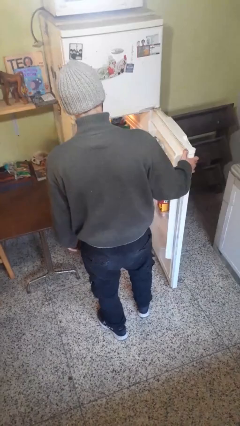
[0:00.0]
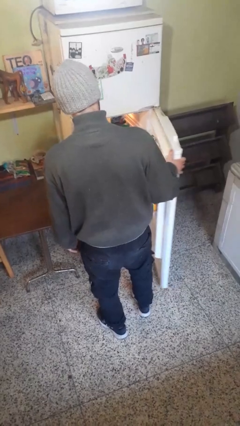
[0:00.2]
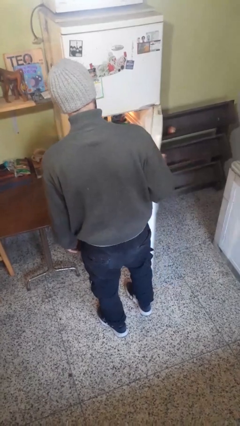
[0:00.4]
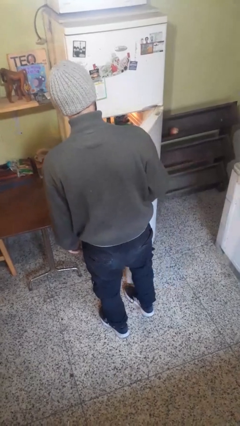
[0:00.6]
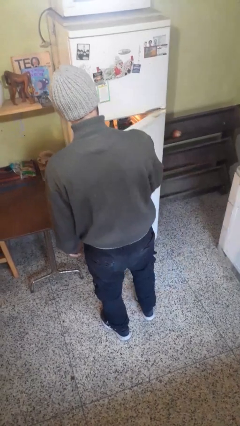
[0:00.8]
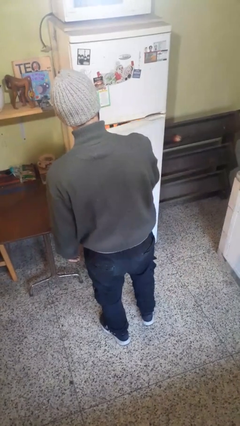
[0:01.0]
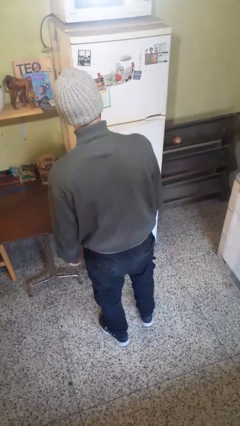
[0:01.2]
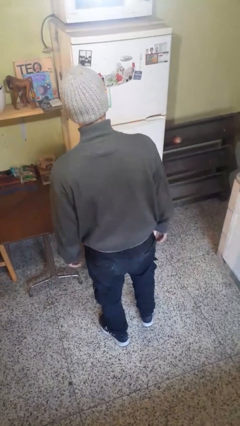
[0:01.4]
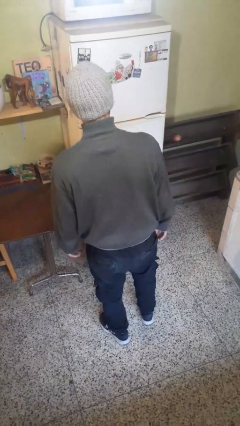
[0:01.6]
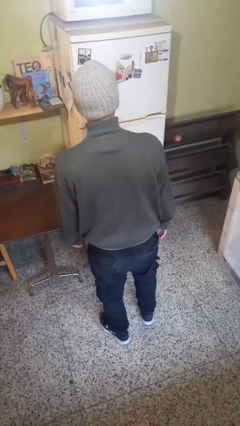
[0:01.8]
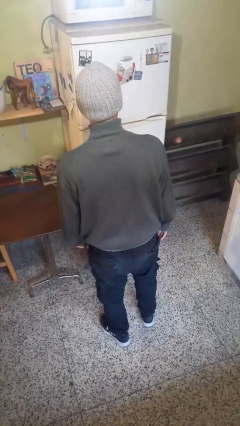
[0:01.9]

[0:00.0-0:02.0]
person closes refrigerator

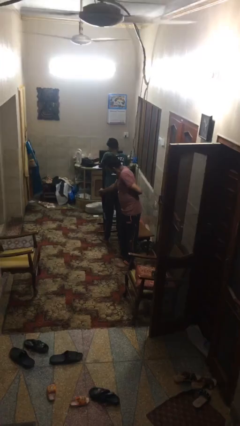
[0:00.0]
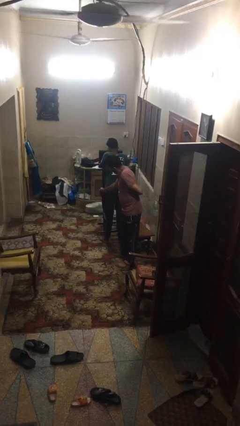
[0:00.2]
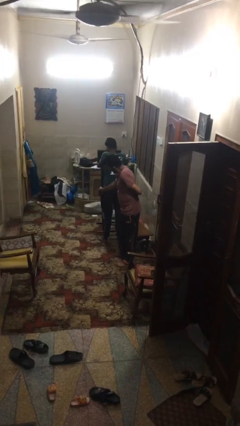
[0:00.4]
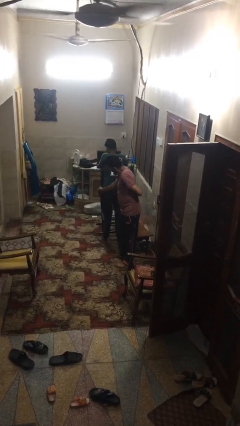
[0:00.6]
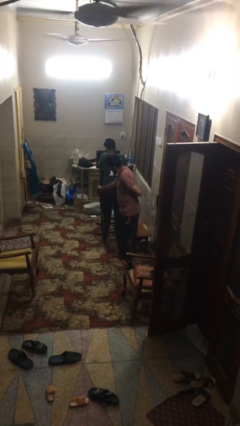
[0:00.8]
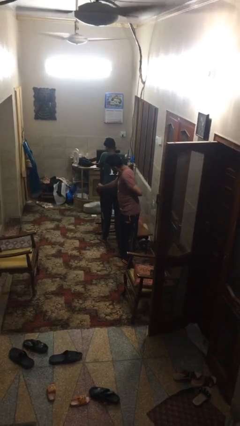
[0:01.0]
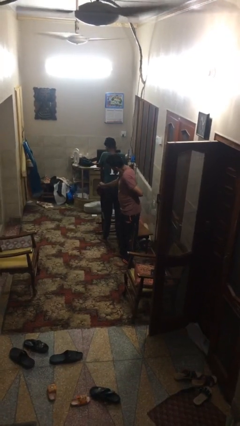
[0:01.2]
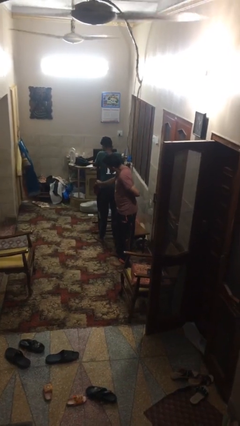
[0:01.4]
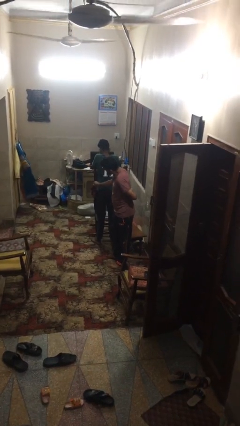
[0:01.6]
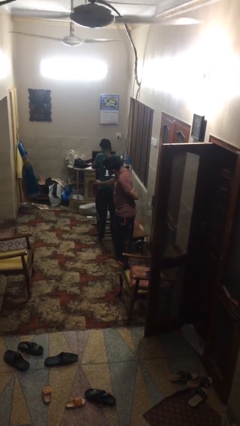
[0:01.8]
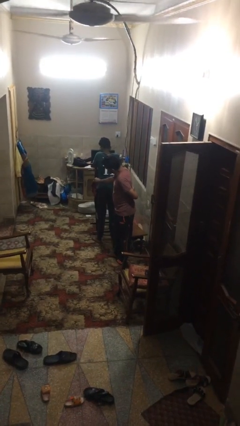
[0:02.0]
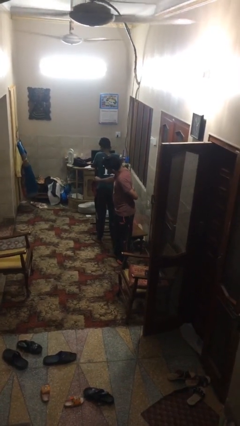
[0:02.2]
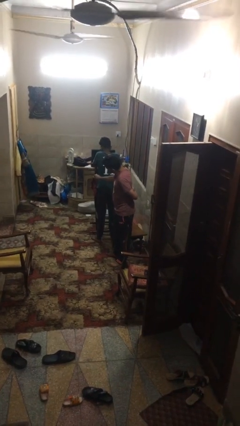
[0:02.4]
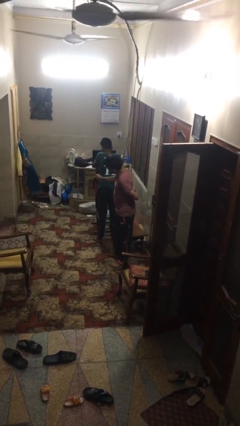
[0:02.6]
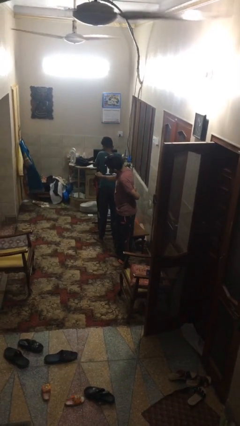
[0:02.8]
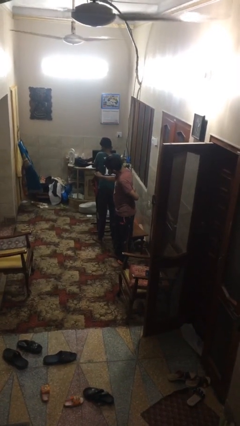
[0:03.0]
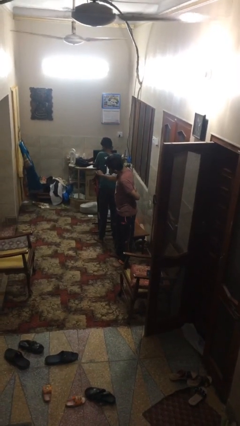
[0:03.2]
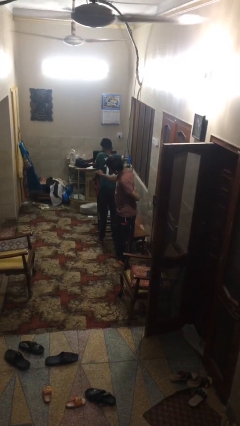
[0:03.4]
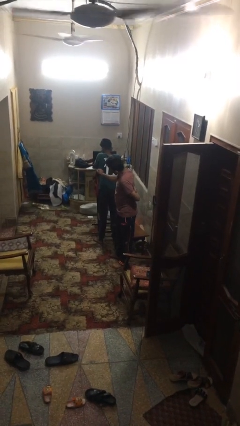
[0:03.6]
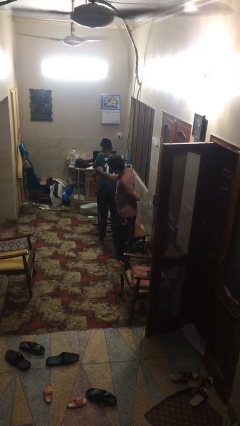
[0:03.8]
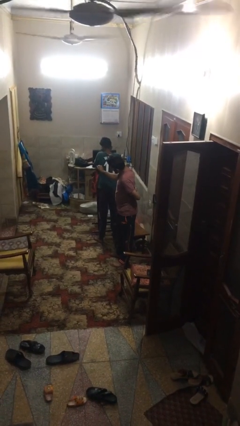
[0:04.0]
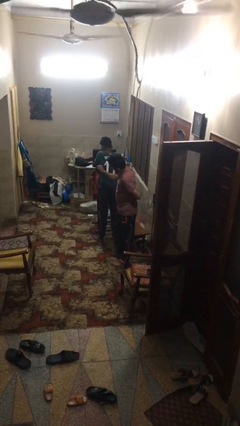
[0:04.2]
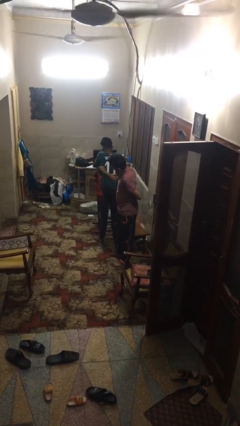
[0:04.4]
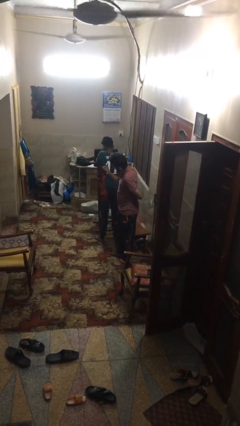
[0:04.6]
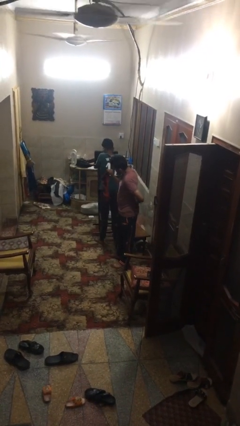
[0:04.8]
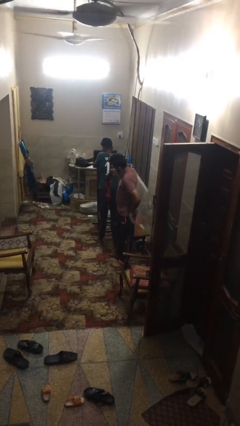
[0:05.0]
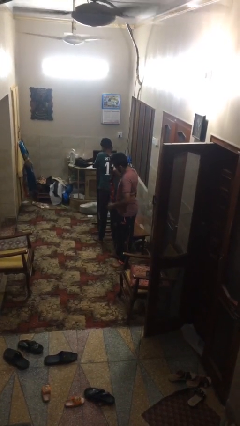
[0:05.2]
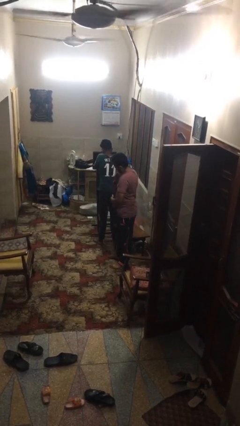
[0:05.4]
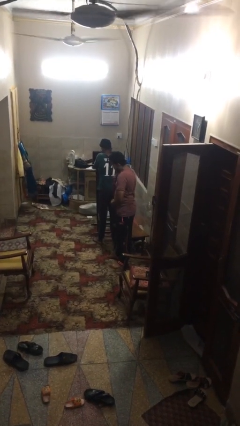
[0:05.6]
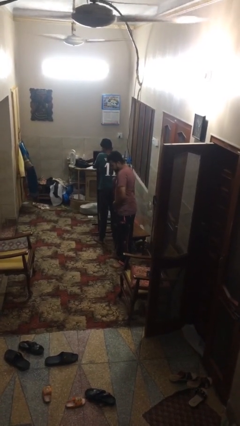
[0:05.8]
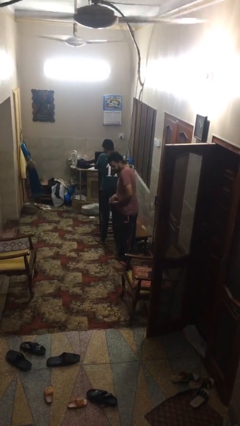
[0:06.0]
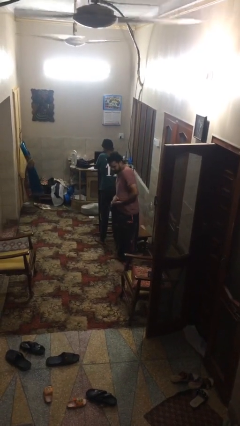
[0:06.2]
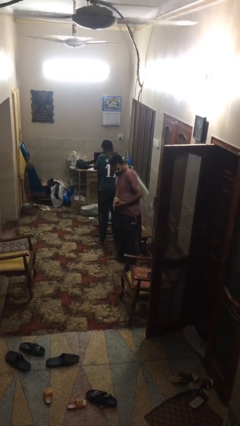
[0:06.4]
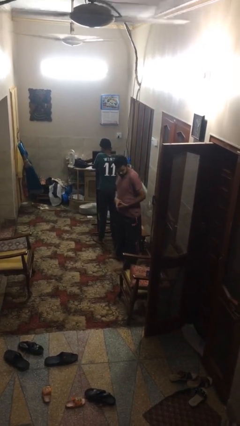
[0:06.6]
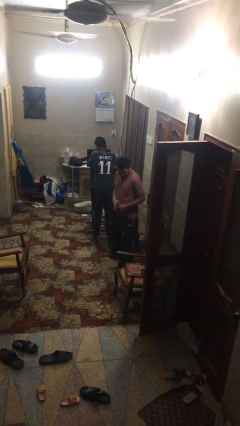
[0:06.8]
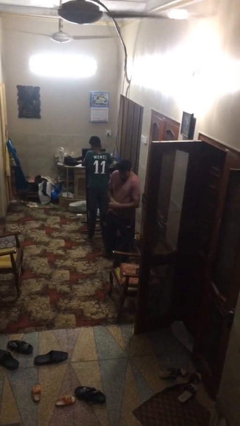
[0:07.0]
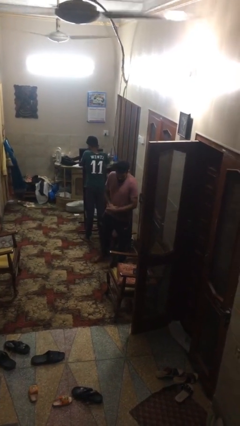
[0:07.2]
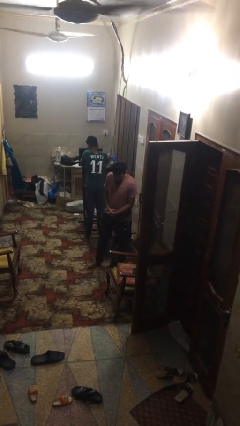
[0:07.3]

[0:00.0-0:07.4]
person steals object from person

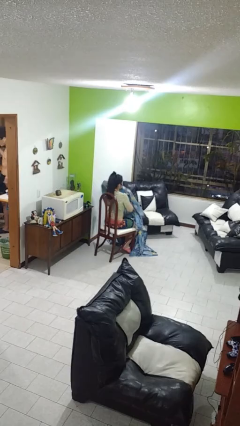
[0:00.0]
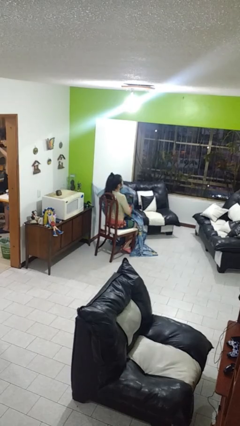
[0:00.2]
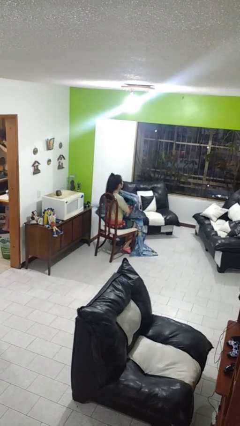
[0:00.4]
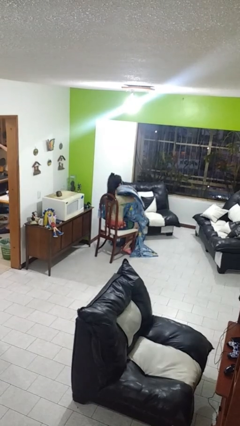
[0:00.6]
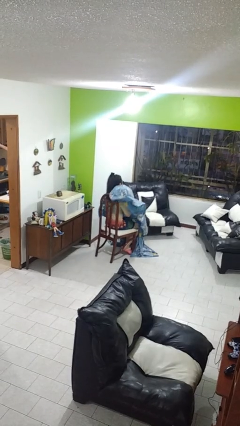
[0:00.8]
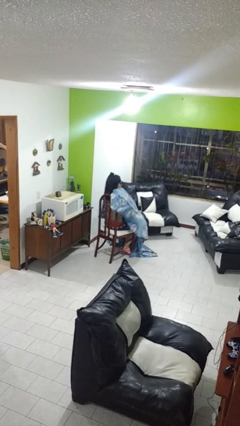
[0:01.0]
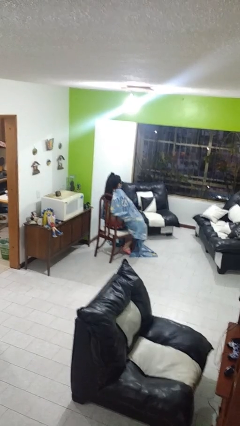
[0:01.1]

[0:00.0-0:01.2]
person covers with blanket

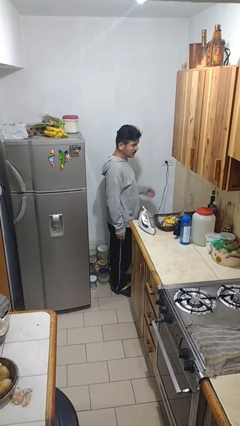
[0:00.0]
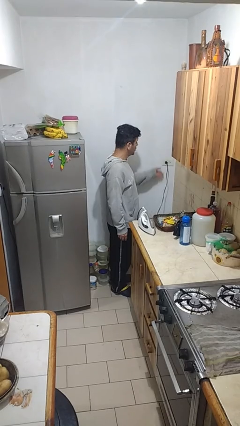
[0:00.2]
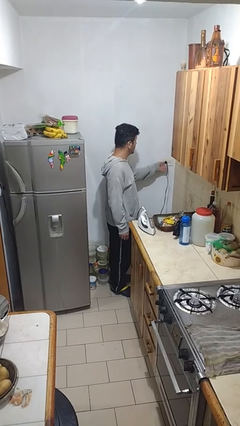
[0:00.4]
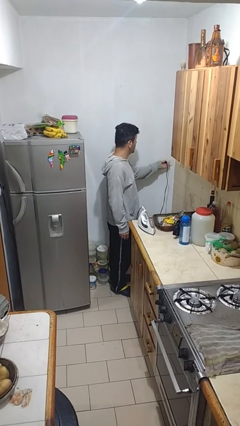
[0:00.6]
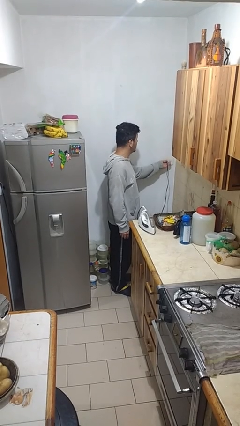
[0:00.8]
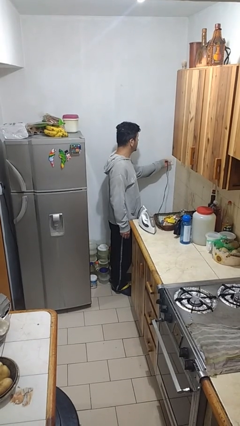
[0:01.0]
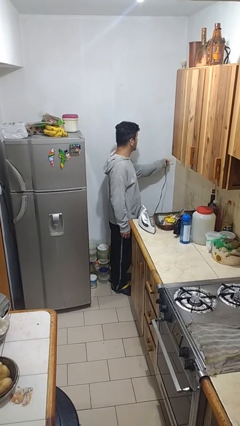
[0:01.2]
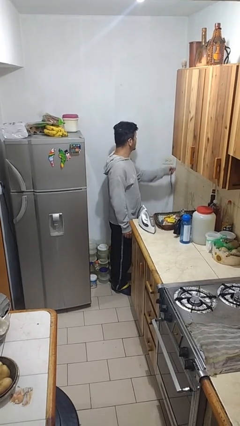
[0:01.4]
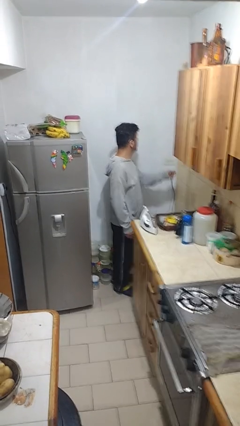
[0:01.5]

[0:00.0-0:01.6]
person unplugs from electrical socket

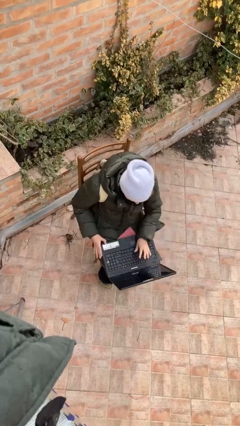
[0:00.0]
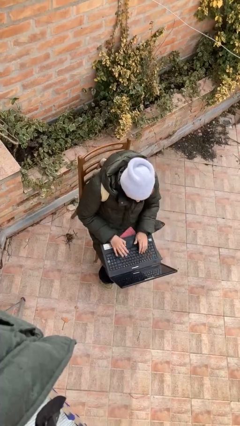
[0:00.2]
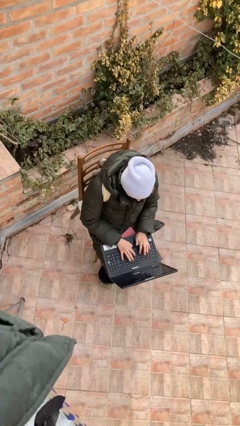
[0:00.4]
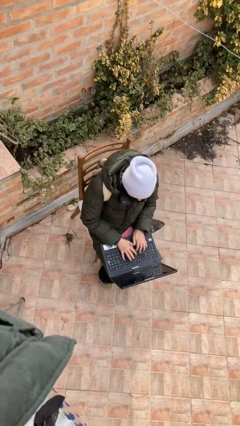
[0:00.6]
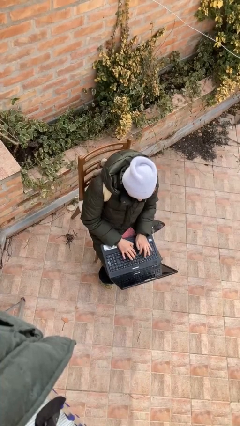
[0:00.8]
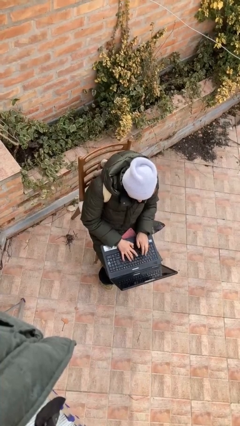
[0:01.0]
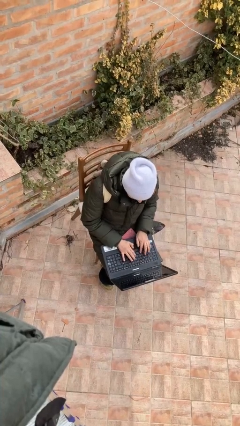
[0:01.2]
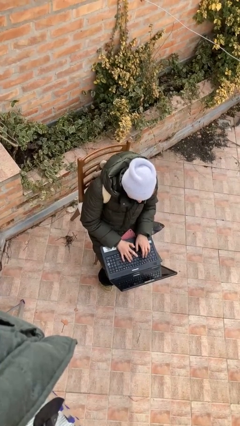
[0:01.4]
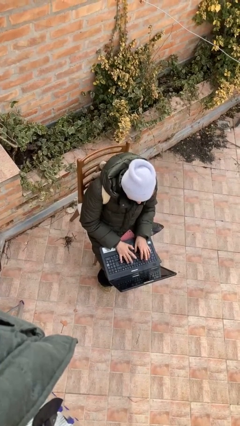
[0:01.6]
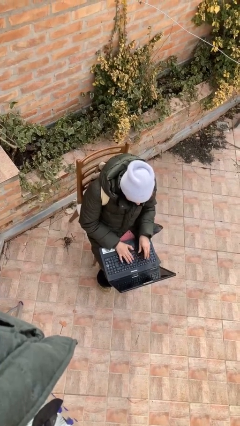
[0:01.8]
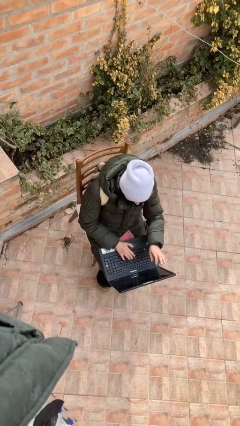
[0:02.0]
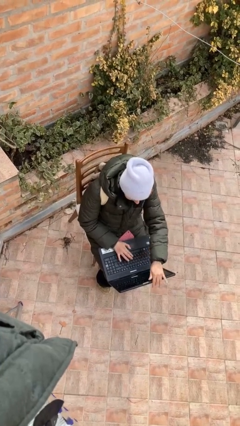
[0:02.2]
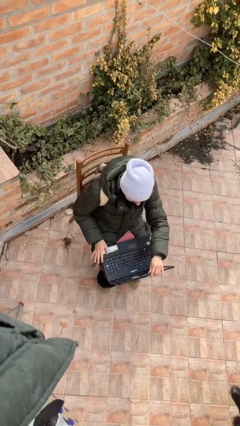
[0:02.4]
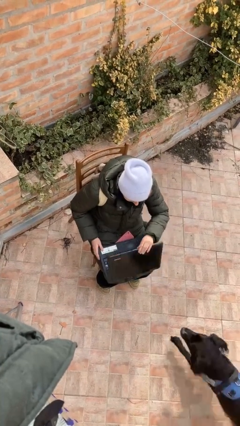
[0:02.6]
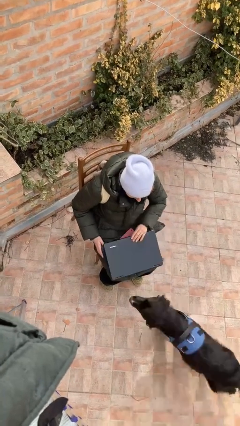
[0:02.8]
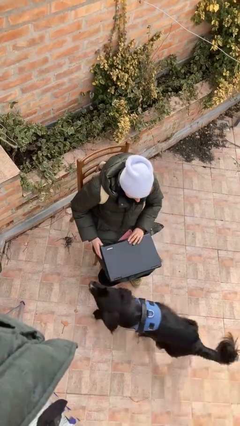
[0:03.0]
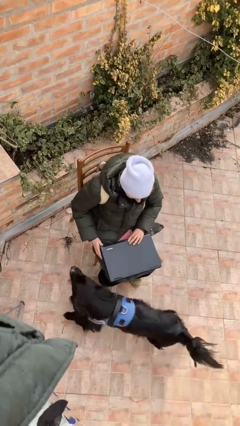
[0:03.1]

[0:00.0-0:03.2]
person interacts with laptop

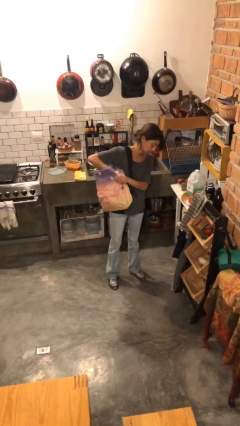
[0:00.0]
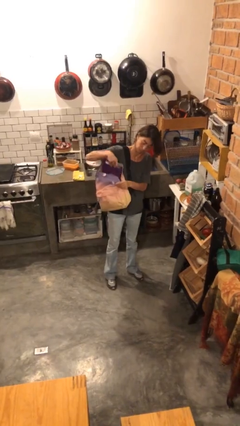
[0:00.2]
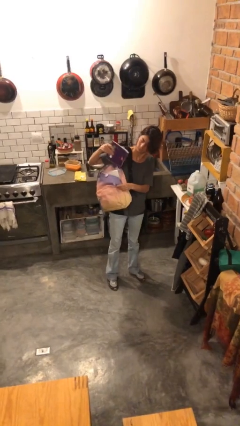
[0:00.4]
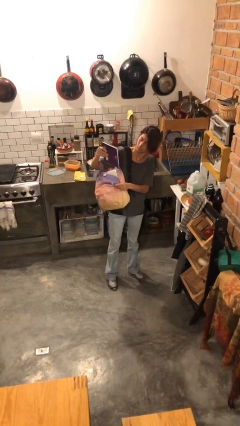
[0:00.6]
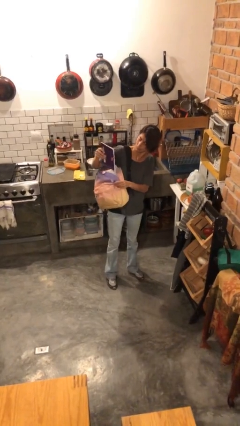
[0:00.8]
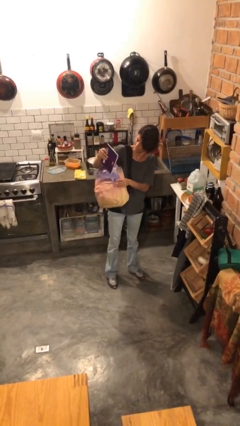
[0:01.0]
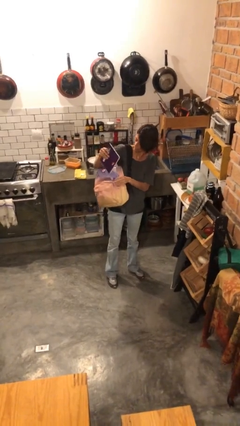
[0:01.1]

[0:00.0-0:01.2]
person takes object from backpack

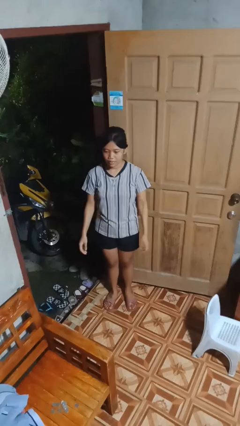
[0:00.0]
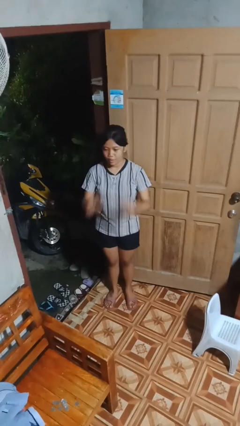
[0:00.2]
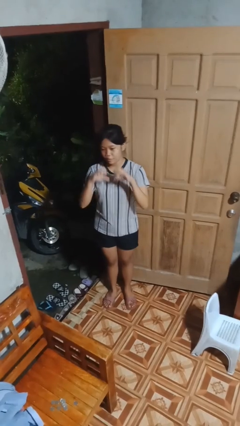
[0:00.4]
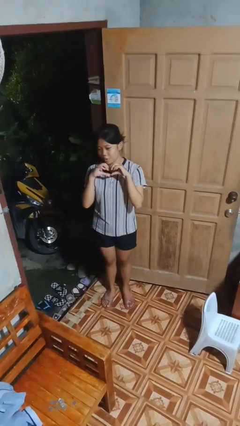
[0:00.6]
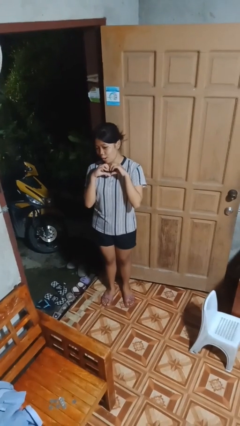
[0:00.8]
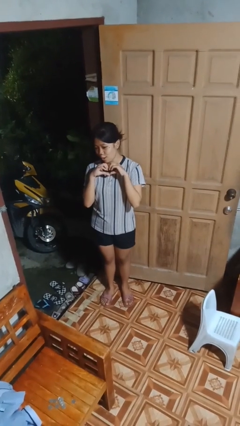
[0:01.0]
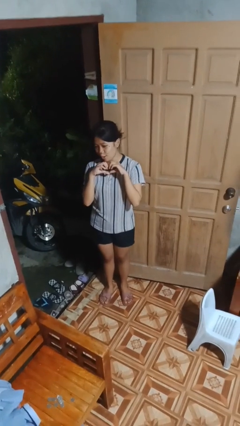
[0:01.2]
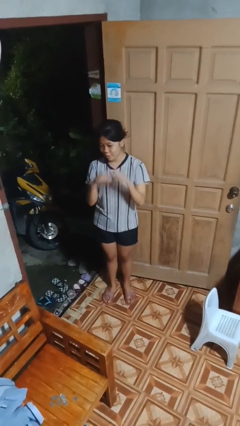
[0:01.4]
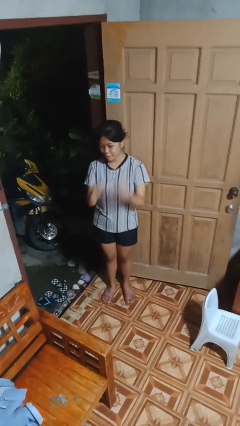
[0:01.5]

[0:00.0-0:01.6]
person gestures heart
